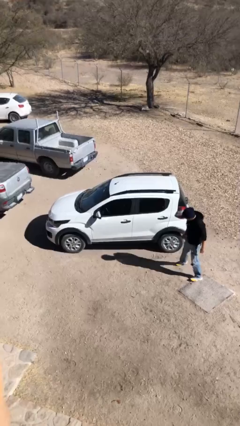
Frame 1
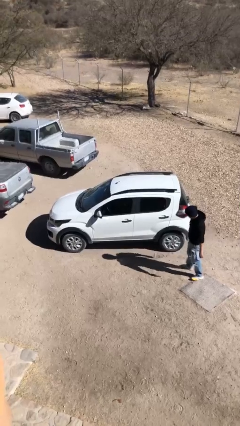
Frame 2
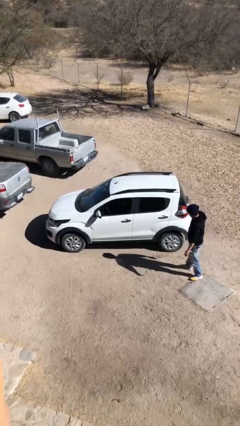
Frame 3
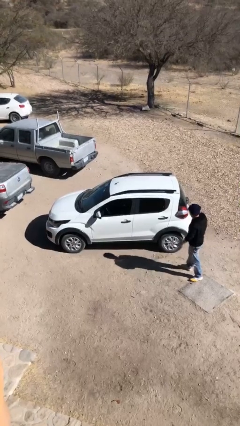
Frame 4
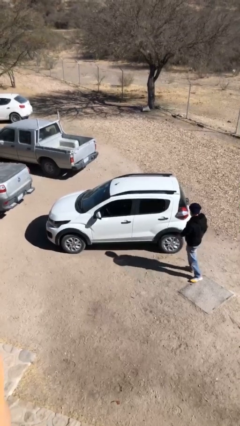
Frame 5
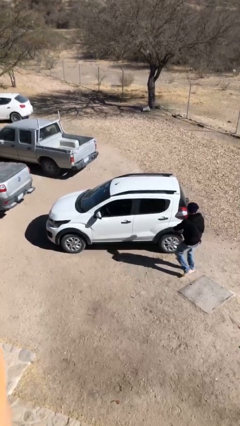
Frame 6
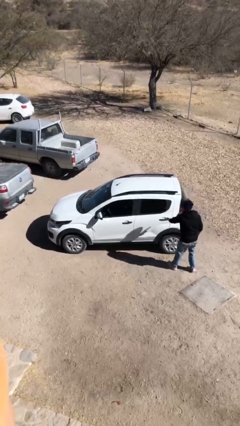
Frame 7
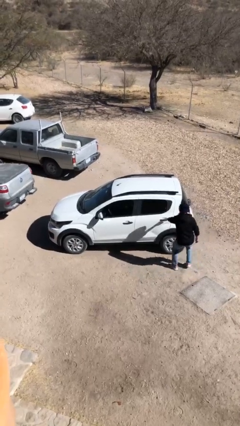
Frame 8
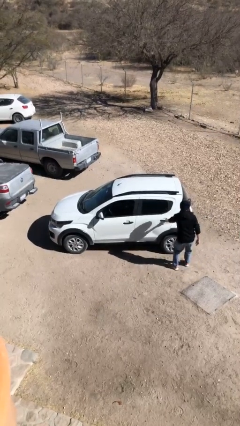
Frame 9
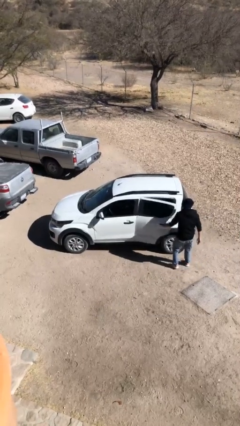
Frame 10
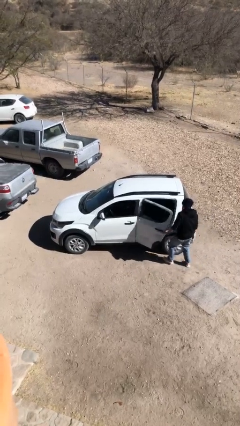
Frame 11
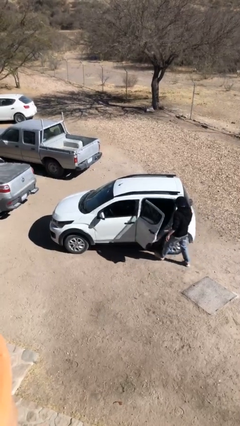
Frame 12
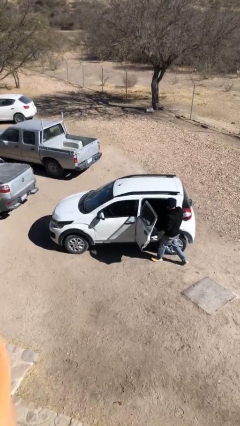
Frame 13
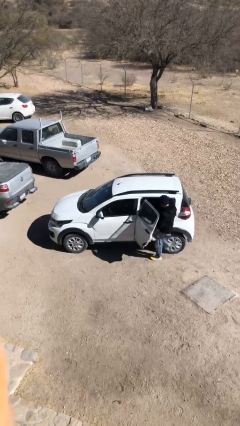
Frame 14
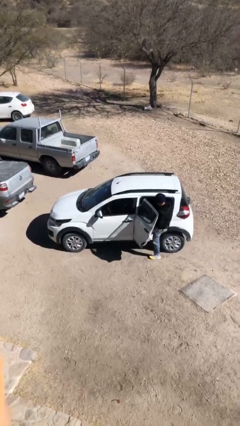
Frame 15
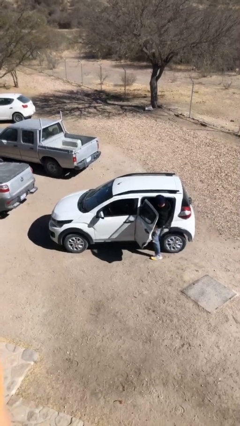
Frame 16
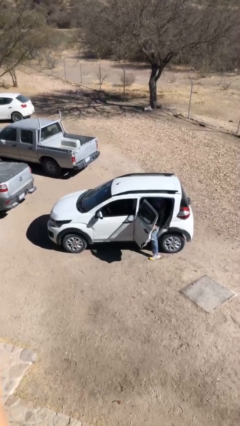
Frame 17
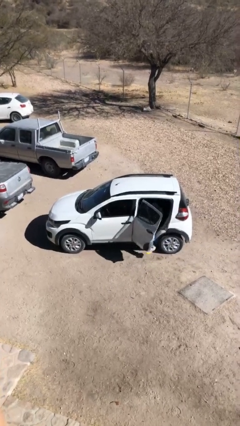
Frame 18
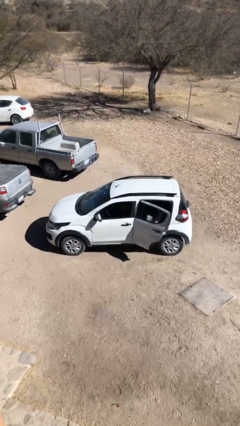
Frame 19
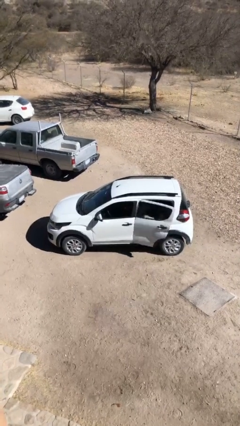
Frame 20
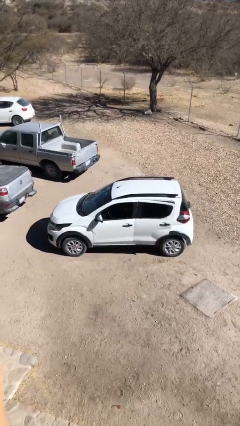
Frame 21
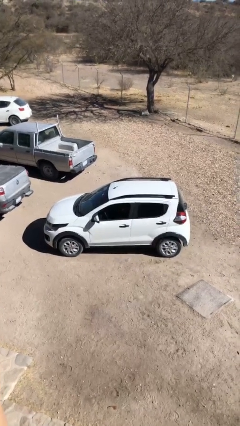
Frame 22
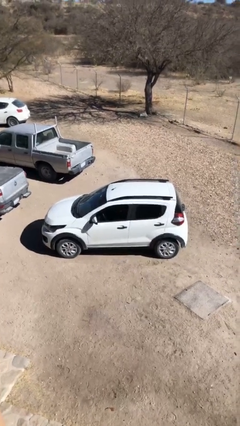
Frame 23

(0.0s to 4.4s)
car picks up person

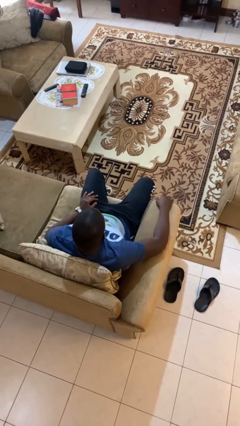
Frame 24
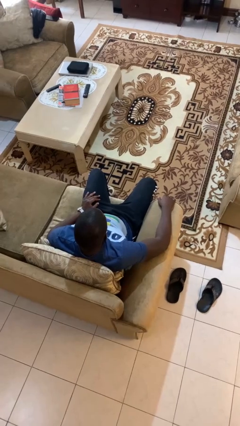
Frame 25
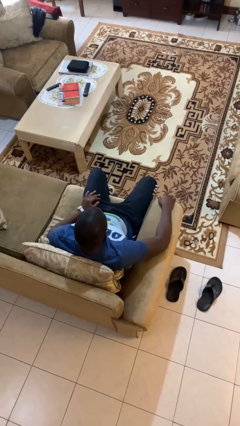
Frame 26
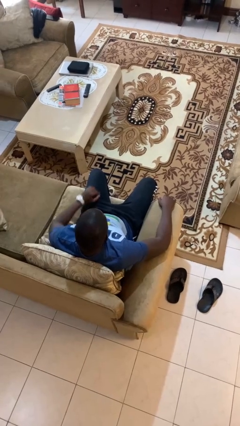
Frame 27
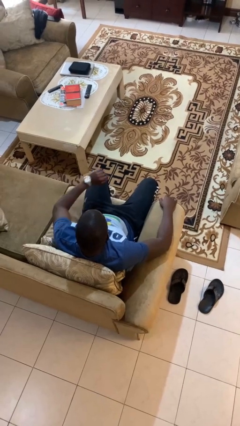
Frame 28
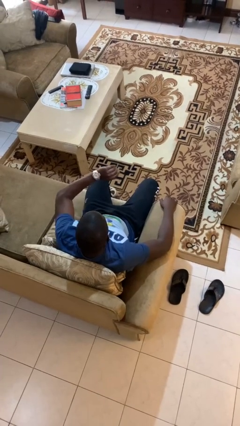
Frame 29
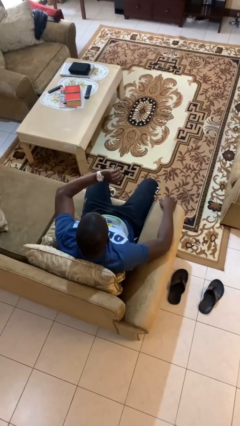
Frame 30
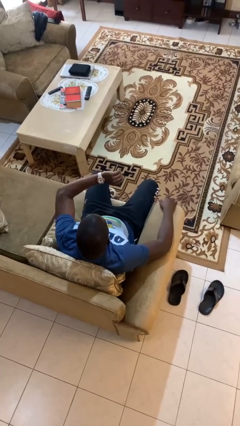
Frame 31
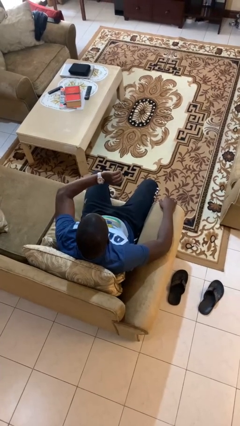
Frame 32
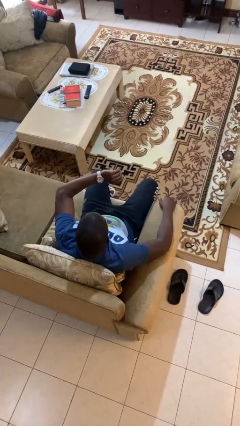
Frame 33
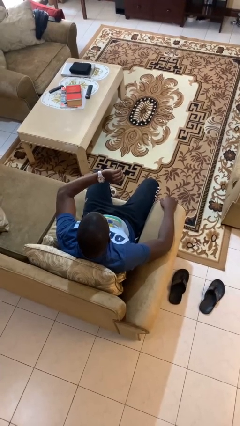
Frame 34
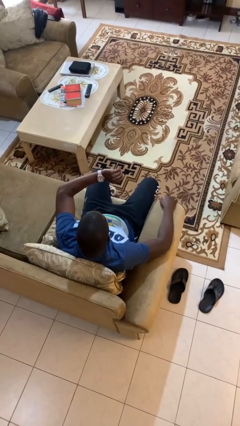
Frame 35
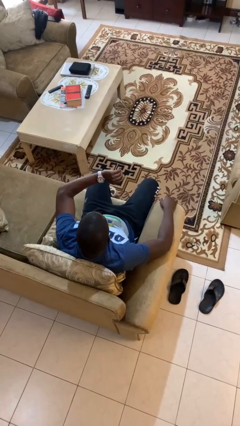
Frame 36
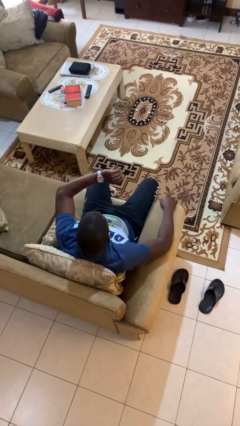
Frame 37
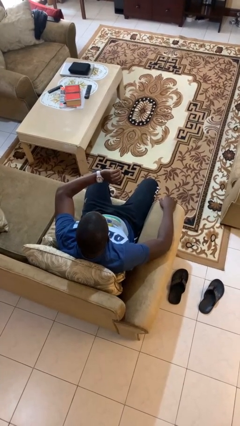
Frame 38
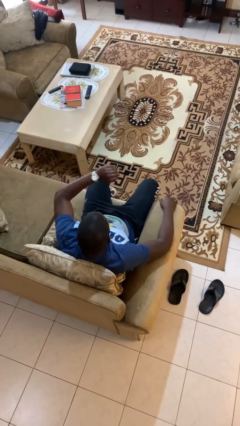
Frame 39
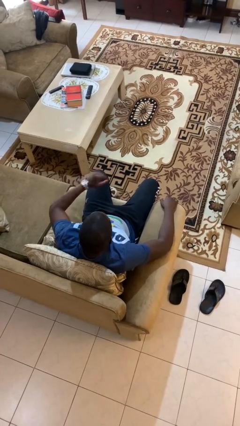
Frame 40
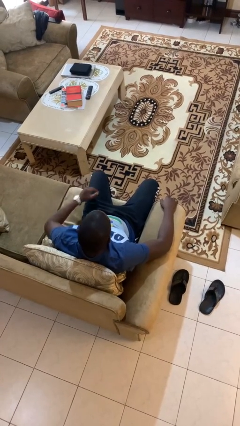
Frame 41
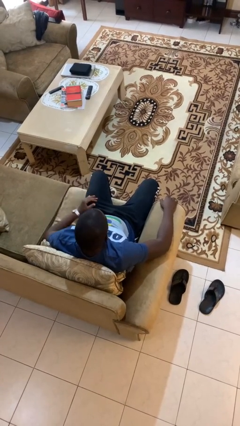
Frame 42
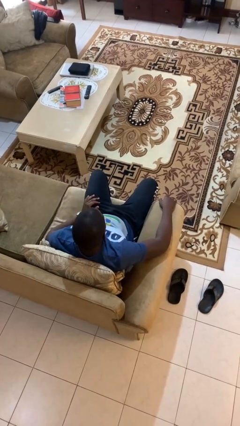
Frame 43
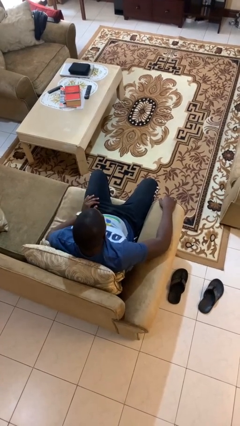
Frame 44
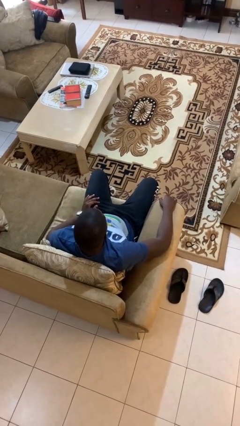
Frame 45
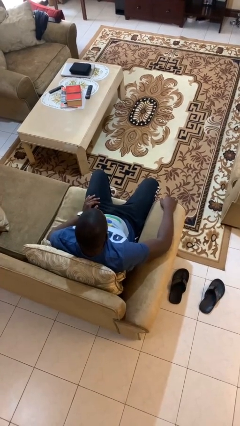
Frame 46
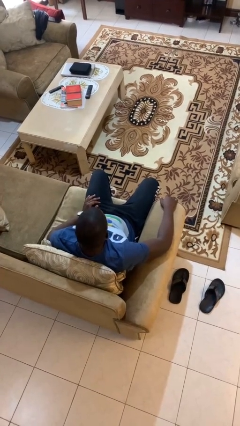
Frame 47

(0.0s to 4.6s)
person looks at wristwatch

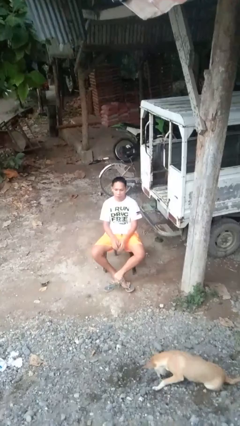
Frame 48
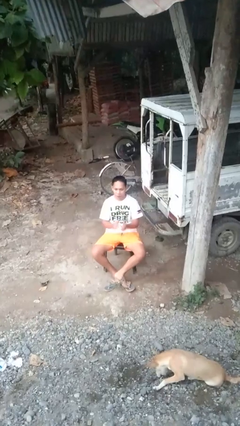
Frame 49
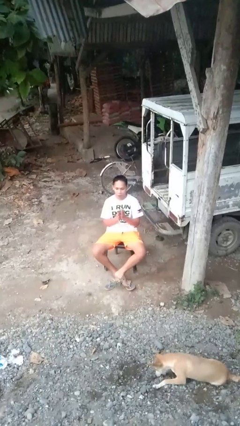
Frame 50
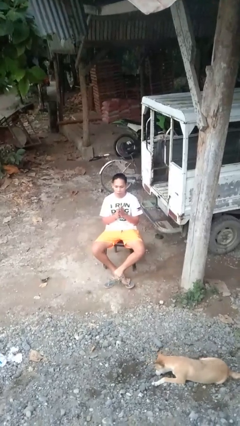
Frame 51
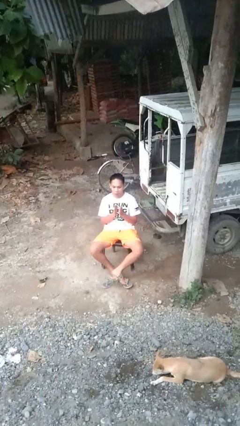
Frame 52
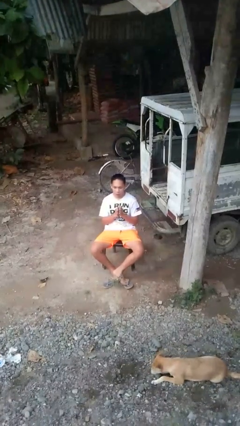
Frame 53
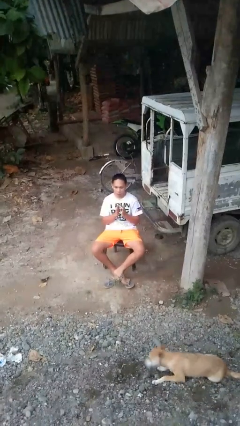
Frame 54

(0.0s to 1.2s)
person claps hands

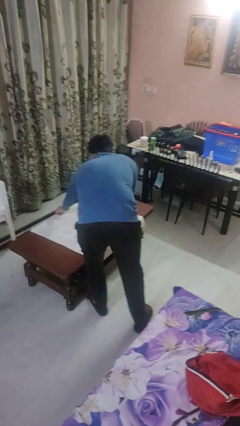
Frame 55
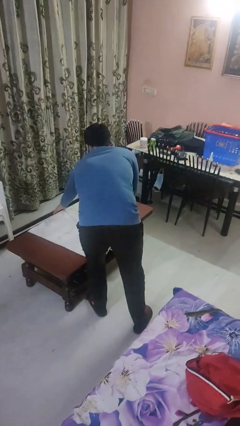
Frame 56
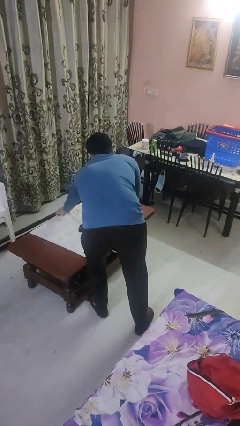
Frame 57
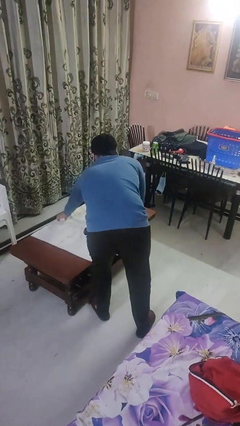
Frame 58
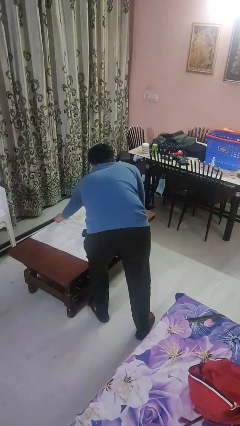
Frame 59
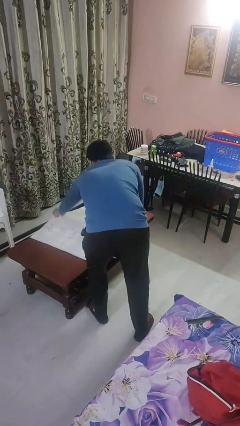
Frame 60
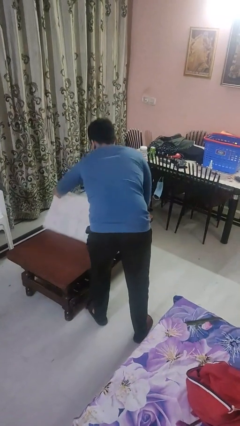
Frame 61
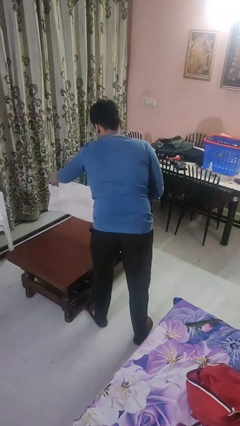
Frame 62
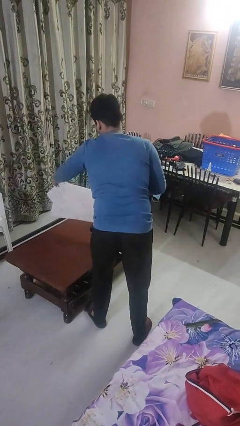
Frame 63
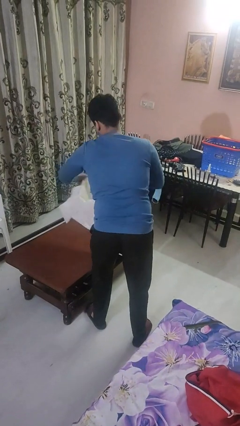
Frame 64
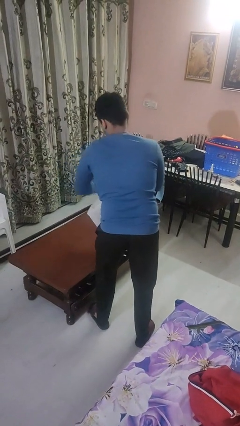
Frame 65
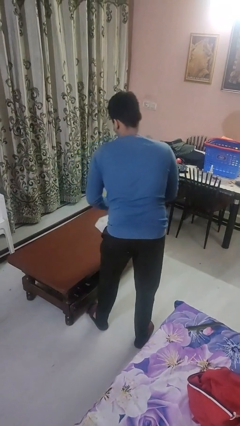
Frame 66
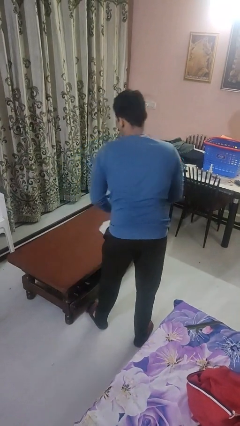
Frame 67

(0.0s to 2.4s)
person folds tablecloth

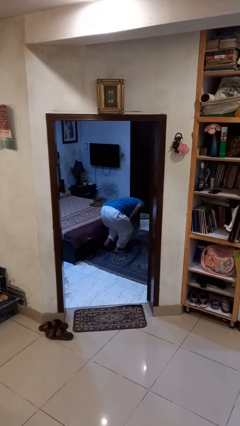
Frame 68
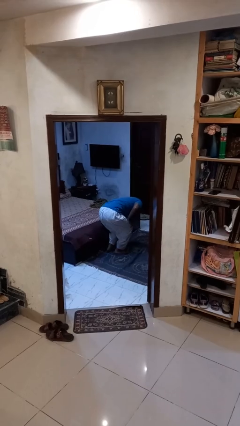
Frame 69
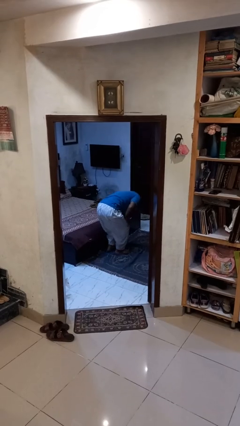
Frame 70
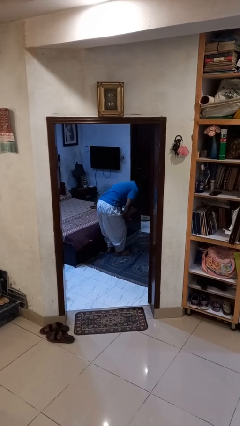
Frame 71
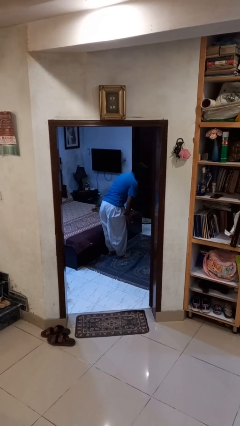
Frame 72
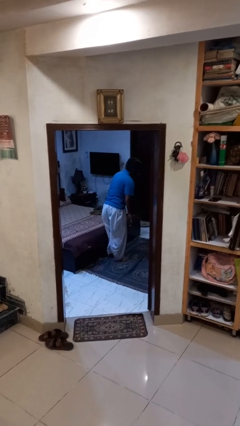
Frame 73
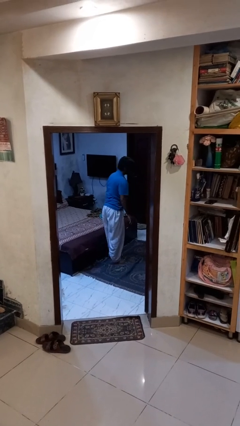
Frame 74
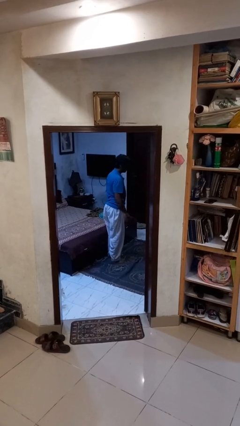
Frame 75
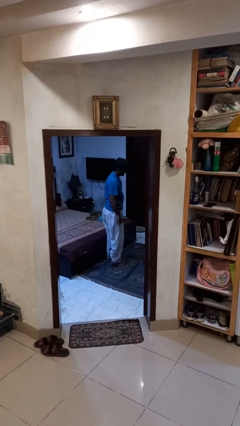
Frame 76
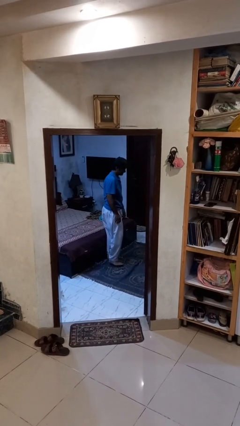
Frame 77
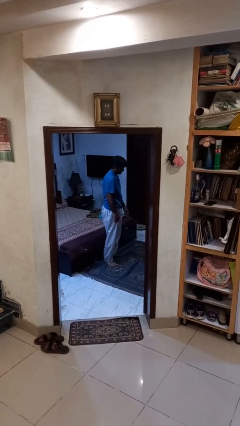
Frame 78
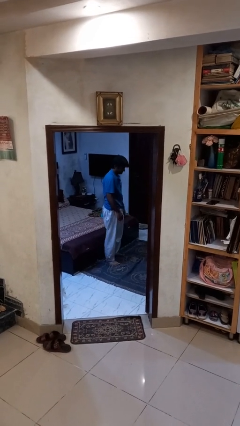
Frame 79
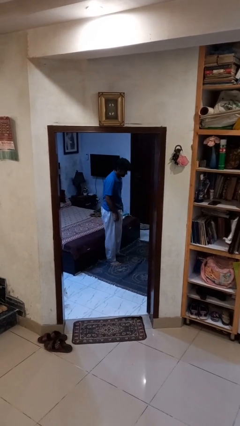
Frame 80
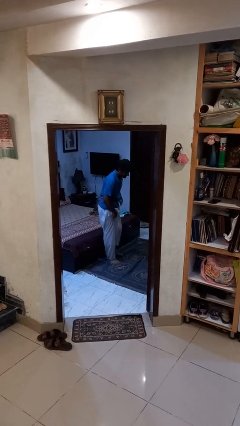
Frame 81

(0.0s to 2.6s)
person stands up from floor

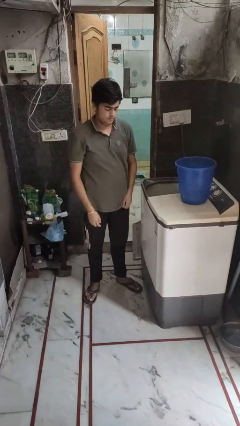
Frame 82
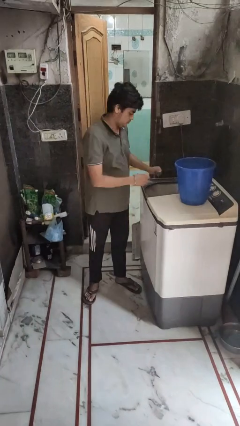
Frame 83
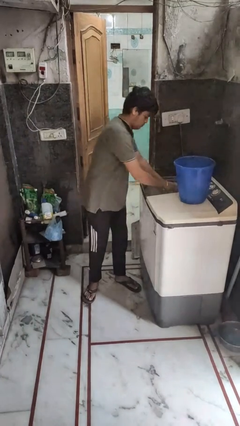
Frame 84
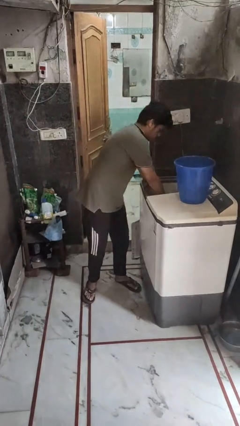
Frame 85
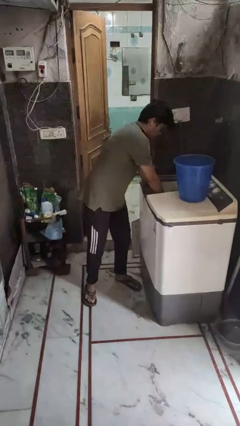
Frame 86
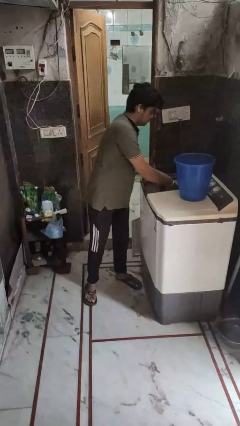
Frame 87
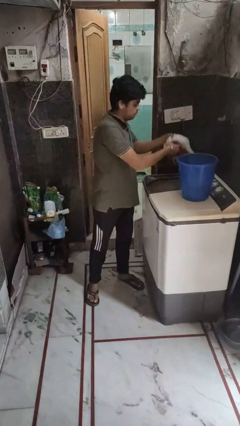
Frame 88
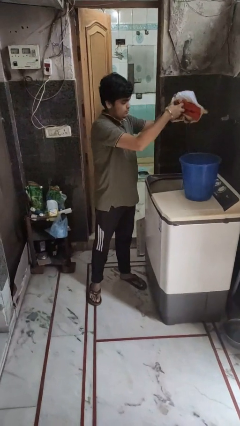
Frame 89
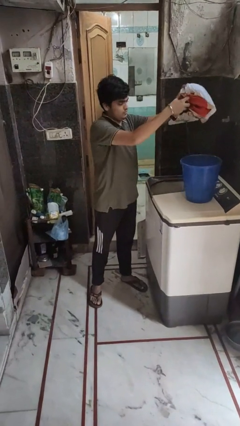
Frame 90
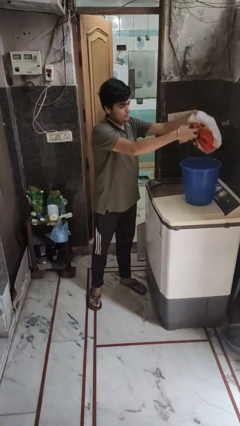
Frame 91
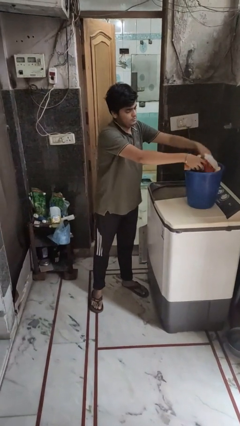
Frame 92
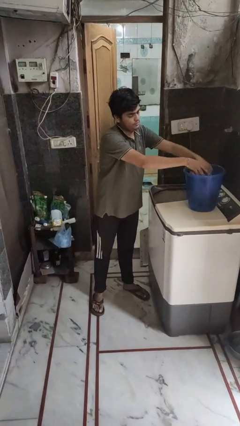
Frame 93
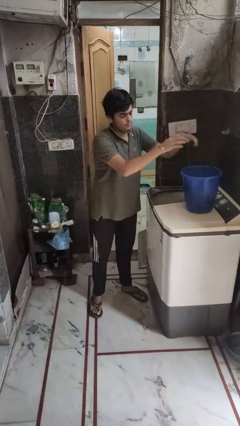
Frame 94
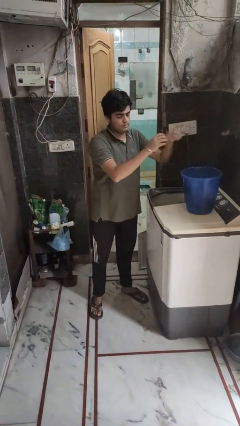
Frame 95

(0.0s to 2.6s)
person unloads clotheswasher
